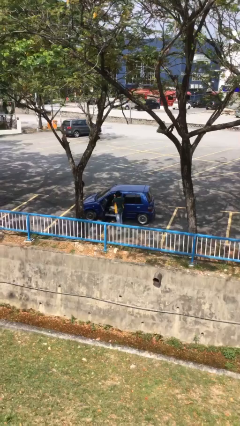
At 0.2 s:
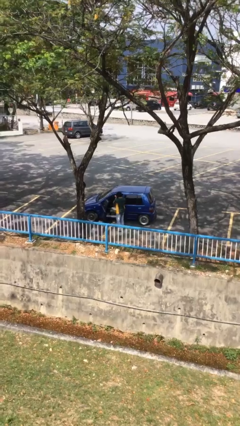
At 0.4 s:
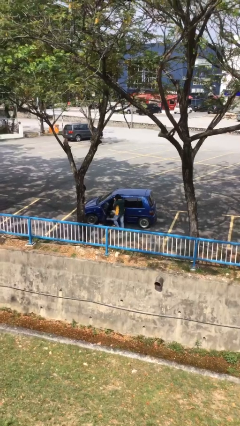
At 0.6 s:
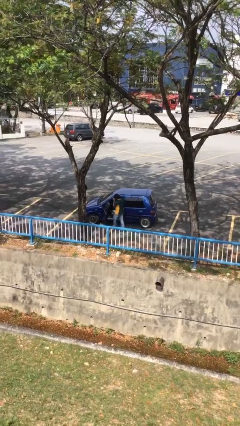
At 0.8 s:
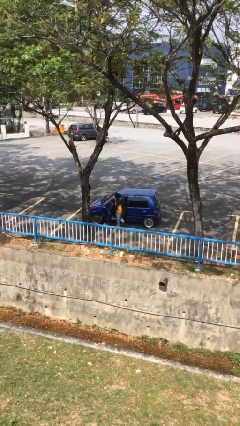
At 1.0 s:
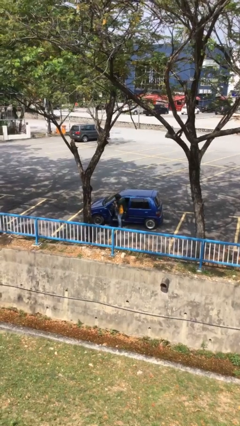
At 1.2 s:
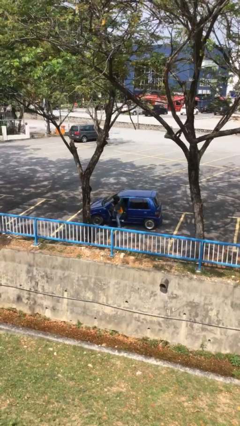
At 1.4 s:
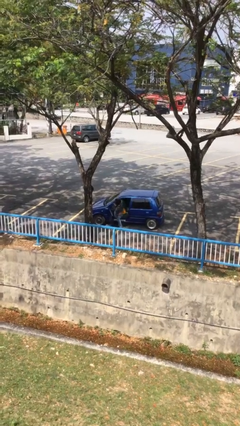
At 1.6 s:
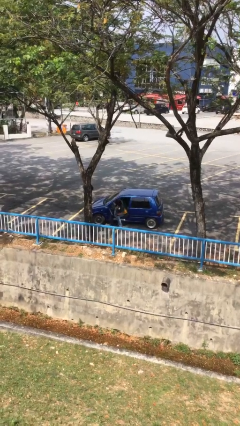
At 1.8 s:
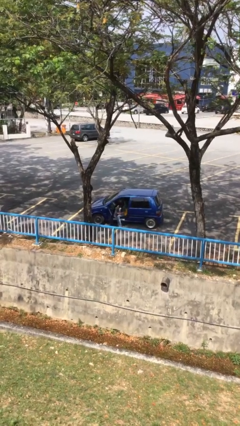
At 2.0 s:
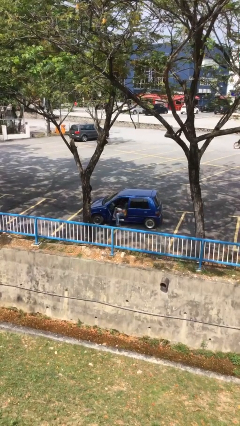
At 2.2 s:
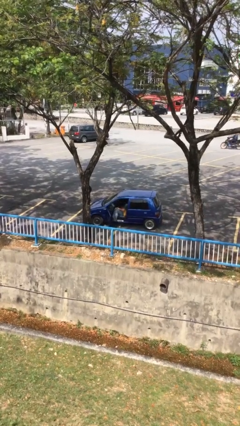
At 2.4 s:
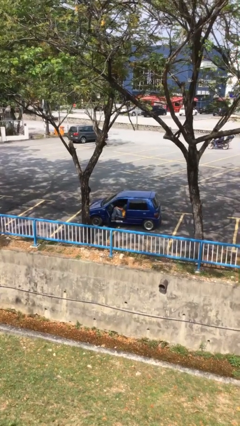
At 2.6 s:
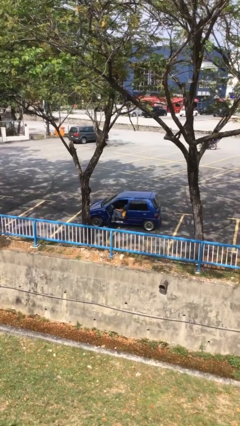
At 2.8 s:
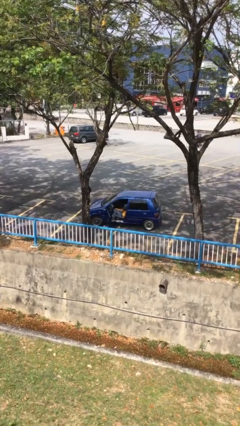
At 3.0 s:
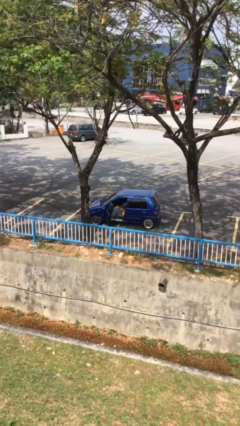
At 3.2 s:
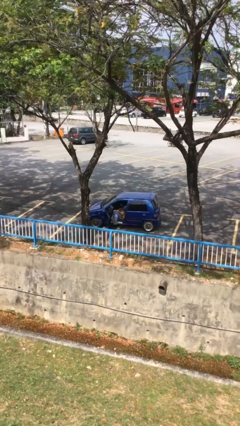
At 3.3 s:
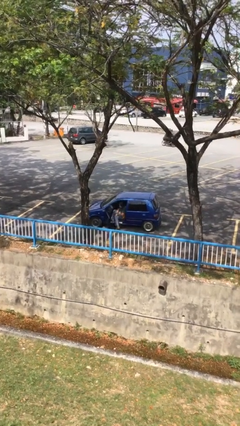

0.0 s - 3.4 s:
person enters car

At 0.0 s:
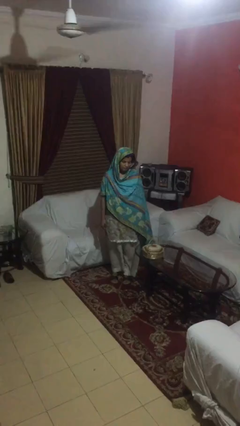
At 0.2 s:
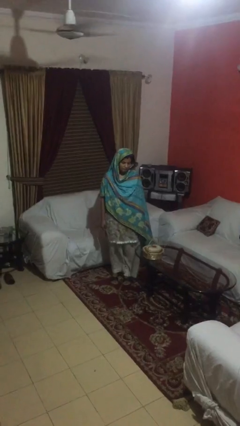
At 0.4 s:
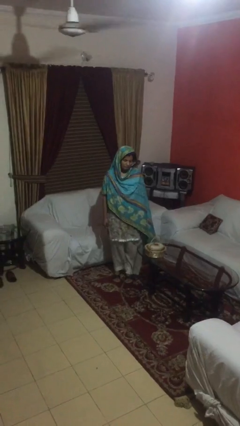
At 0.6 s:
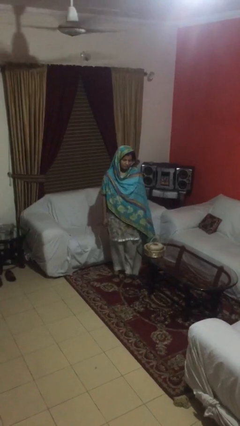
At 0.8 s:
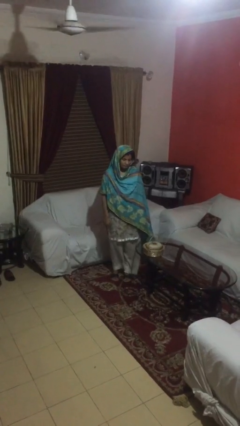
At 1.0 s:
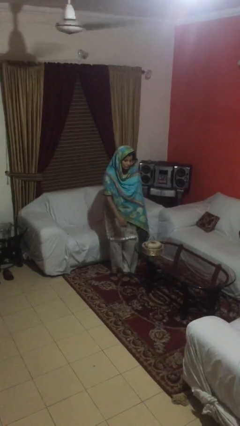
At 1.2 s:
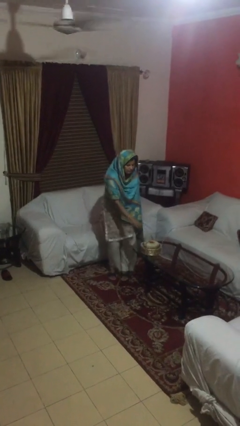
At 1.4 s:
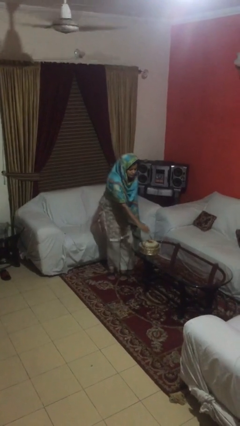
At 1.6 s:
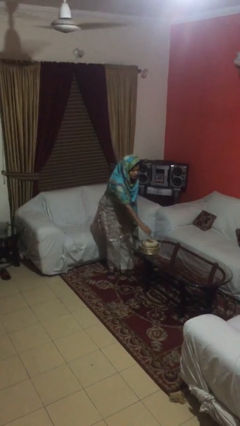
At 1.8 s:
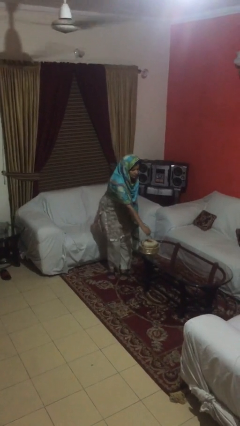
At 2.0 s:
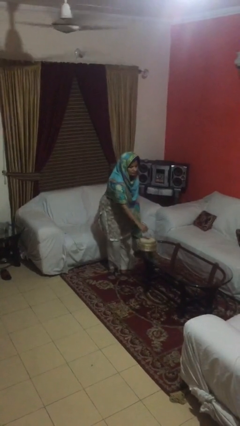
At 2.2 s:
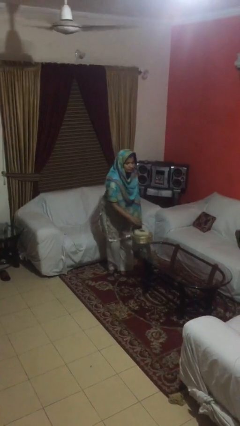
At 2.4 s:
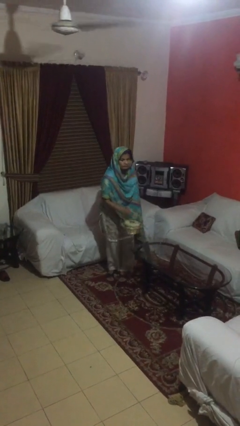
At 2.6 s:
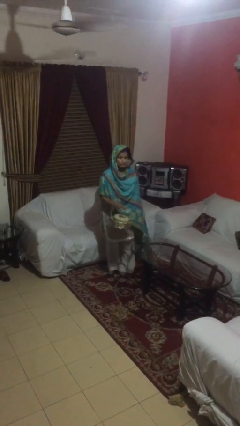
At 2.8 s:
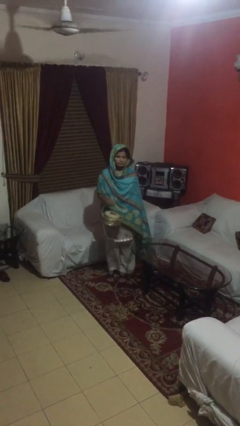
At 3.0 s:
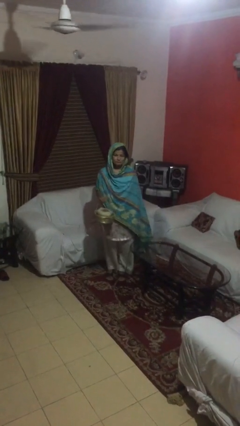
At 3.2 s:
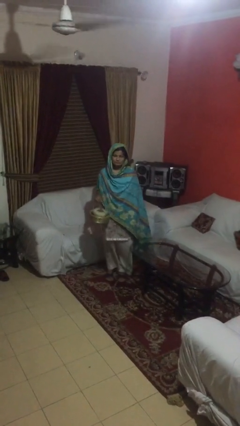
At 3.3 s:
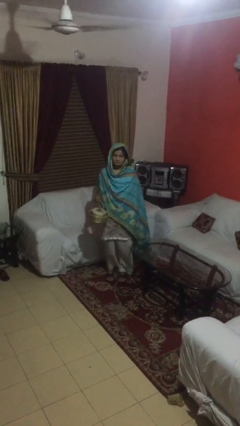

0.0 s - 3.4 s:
person picks up object from table

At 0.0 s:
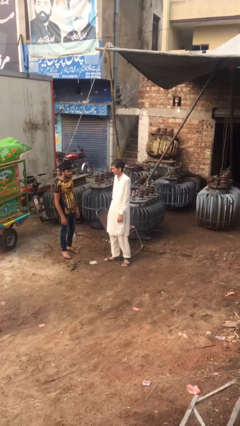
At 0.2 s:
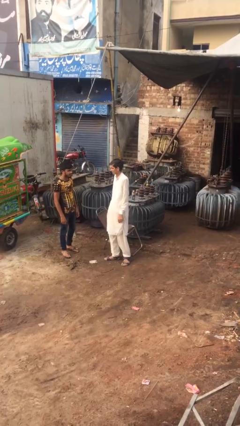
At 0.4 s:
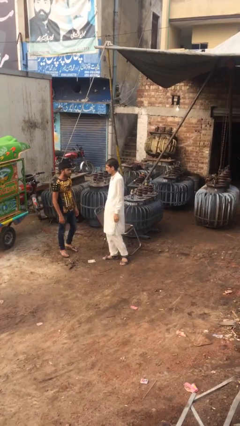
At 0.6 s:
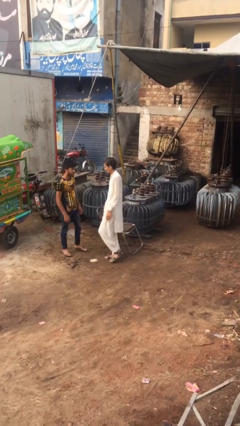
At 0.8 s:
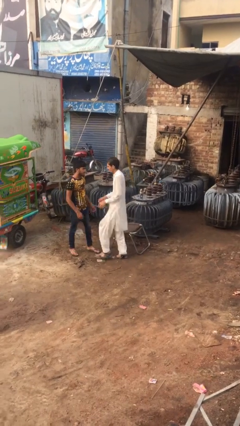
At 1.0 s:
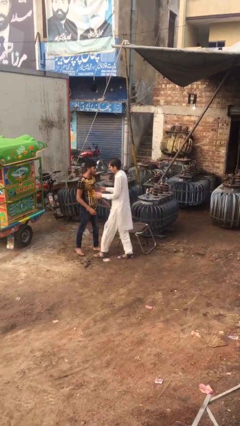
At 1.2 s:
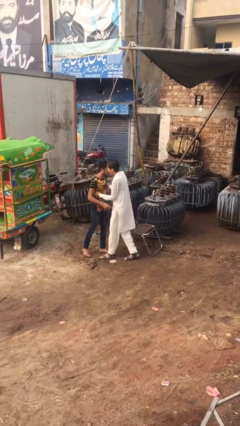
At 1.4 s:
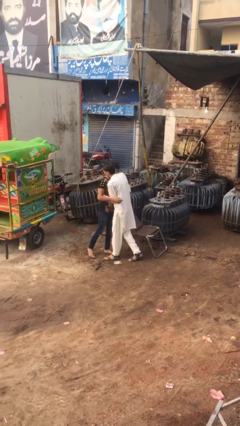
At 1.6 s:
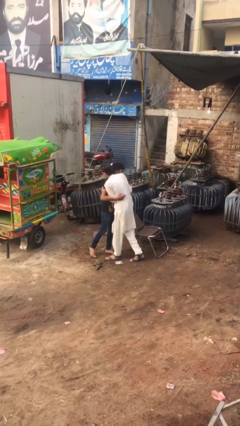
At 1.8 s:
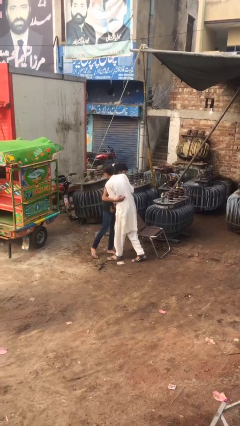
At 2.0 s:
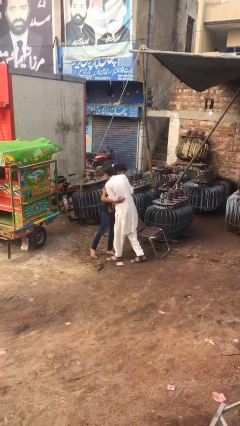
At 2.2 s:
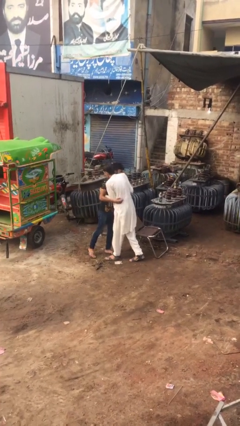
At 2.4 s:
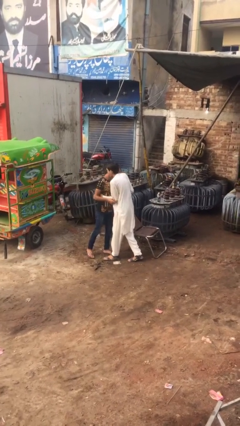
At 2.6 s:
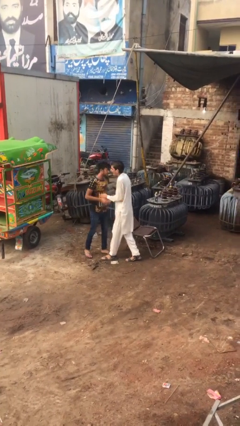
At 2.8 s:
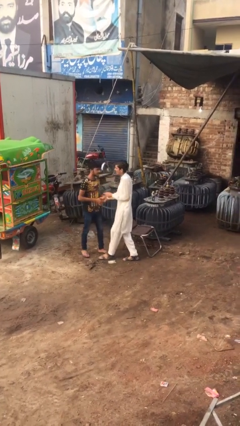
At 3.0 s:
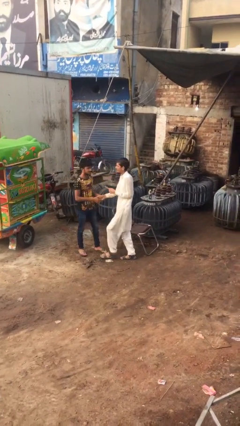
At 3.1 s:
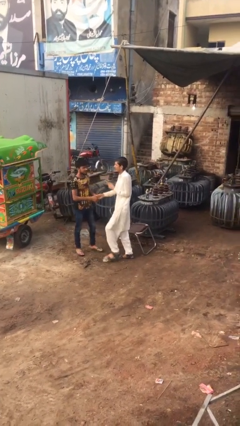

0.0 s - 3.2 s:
person embraces person

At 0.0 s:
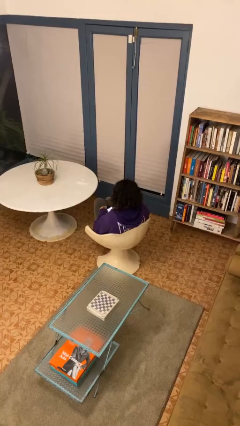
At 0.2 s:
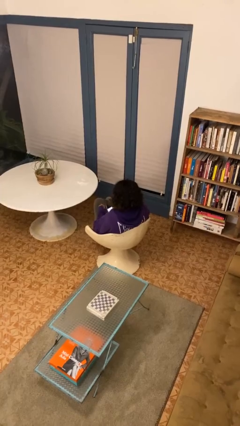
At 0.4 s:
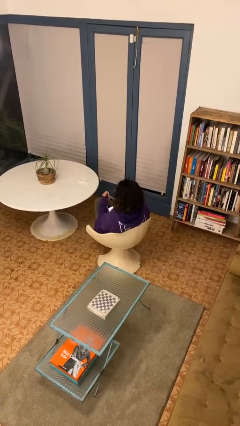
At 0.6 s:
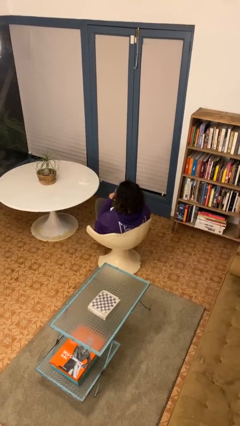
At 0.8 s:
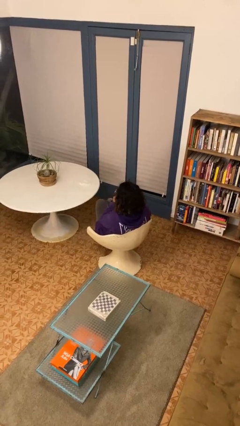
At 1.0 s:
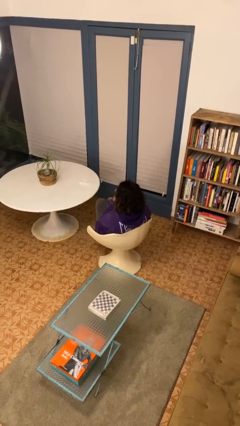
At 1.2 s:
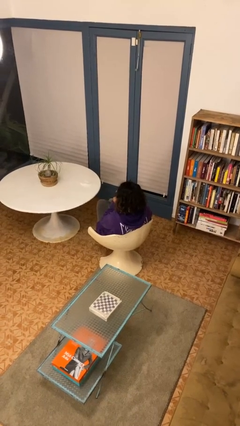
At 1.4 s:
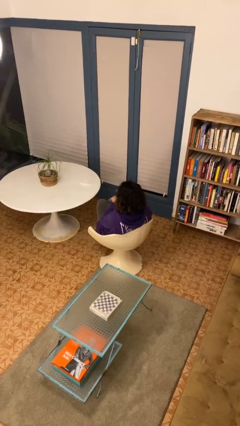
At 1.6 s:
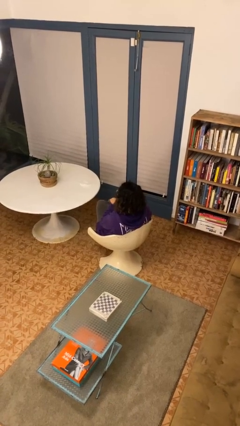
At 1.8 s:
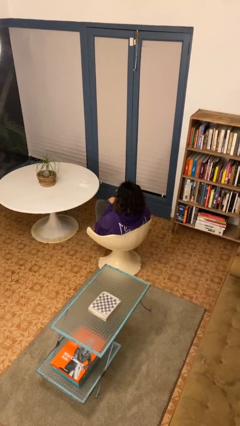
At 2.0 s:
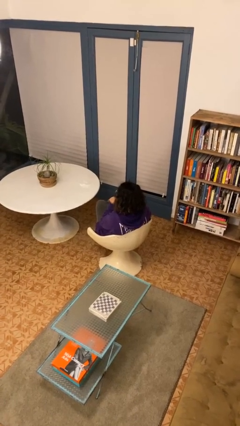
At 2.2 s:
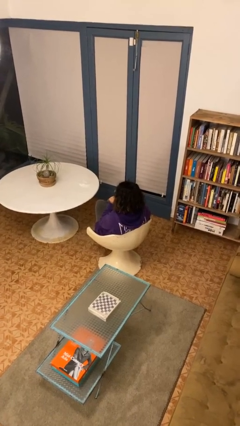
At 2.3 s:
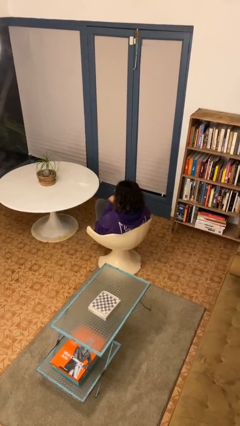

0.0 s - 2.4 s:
person strokes chin

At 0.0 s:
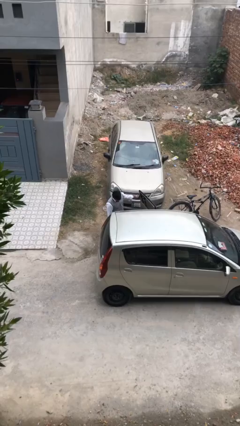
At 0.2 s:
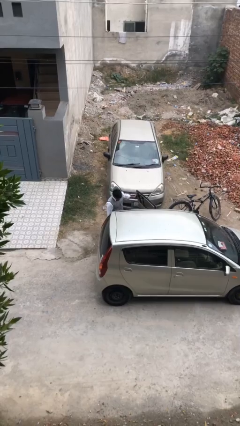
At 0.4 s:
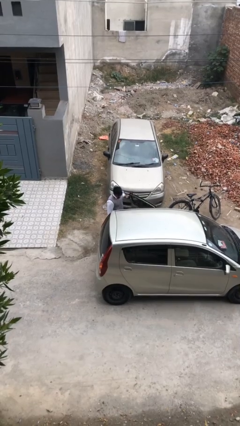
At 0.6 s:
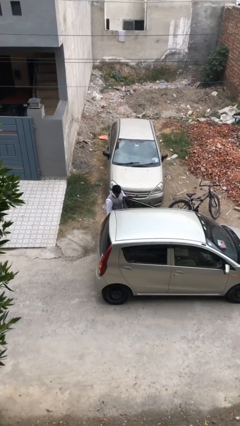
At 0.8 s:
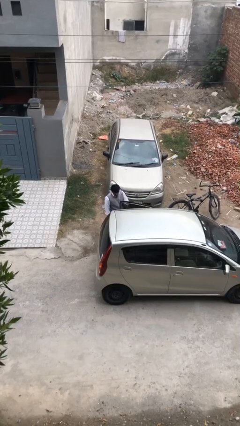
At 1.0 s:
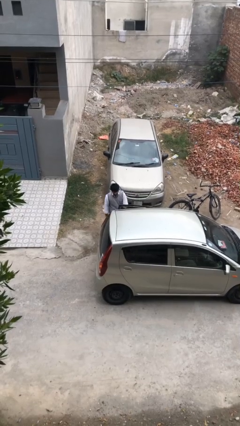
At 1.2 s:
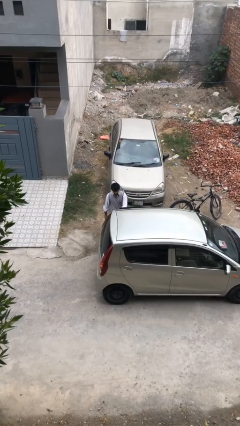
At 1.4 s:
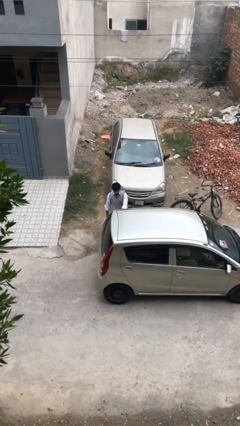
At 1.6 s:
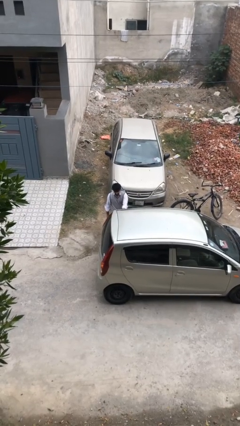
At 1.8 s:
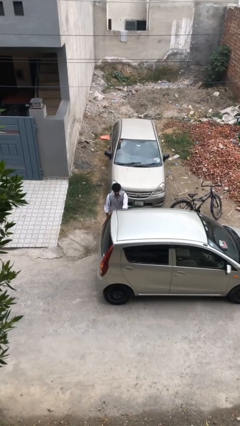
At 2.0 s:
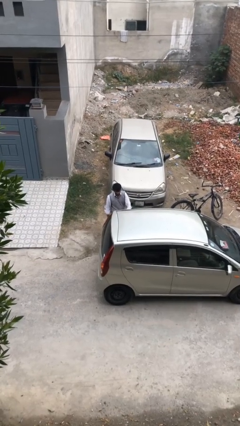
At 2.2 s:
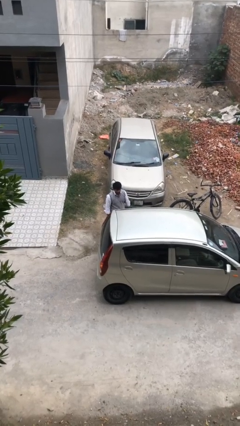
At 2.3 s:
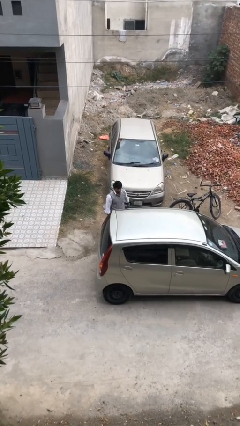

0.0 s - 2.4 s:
person closes car door

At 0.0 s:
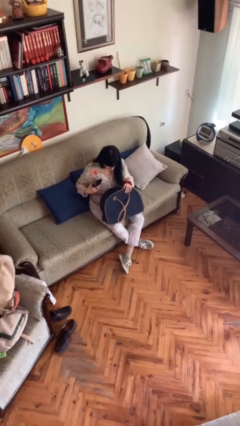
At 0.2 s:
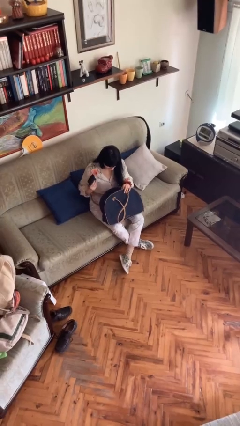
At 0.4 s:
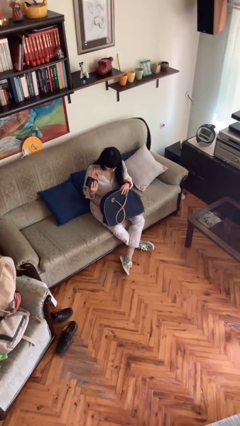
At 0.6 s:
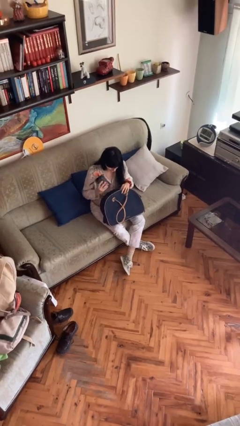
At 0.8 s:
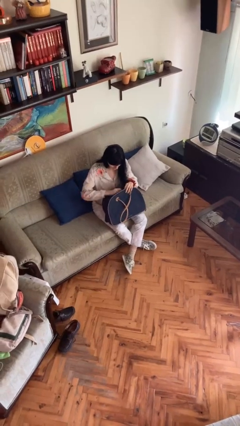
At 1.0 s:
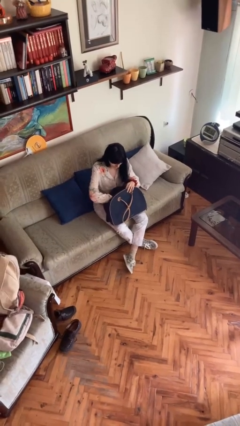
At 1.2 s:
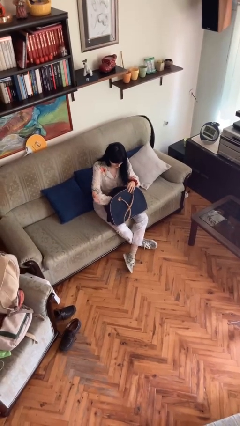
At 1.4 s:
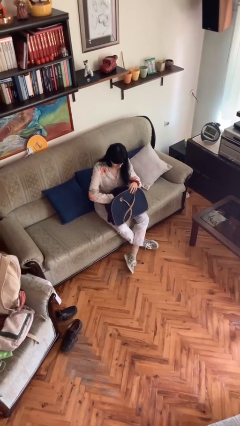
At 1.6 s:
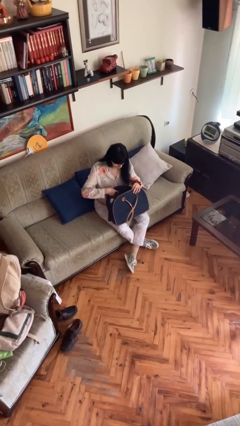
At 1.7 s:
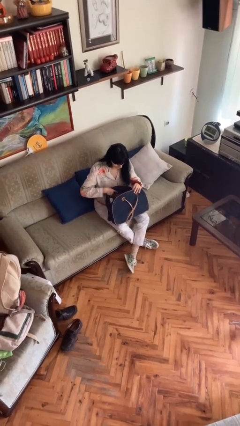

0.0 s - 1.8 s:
person puts object into purse

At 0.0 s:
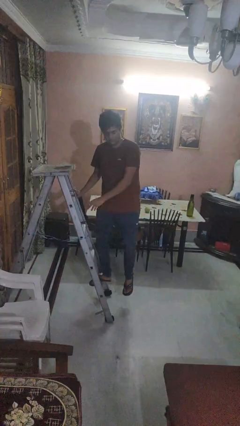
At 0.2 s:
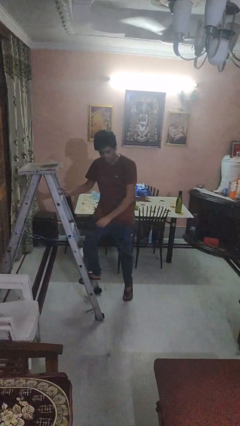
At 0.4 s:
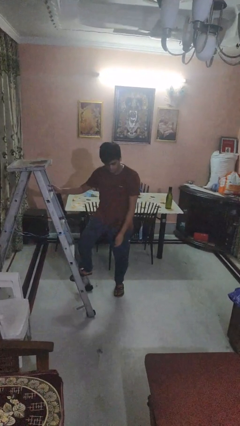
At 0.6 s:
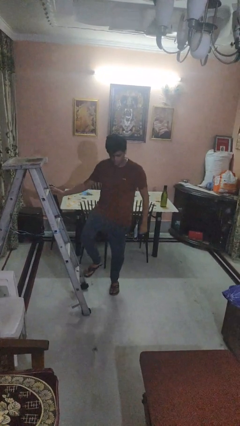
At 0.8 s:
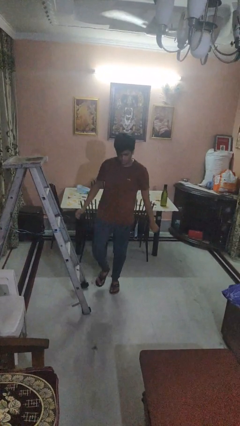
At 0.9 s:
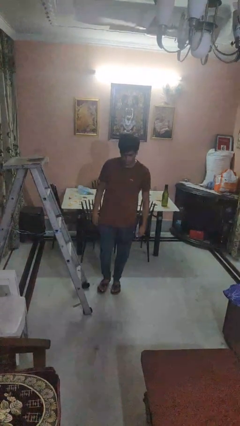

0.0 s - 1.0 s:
person climbs down ladder
